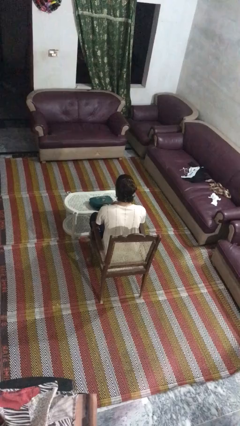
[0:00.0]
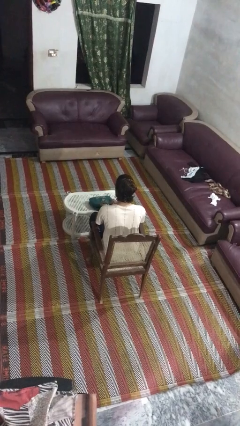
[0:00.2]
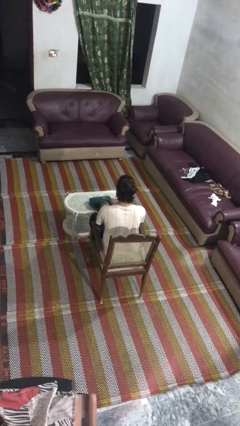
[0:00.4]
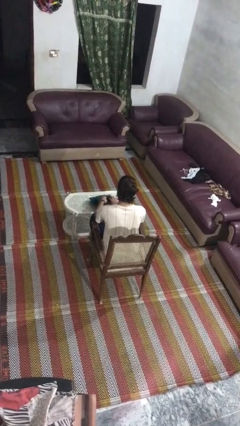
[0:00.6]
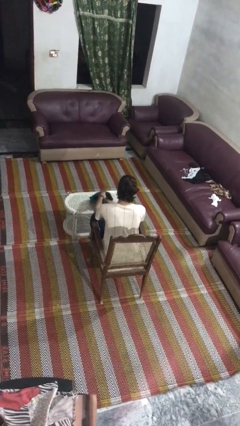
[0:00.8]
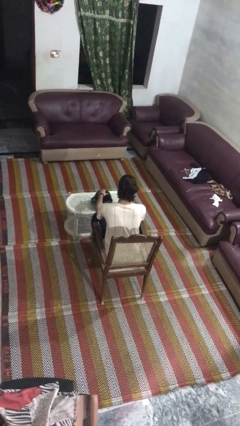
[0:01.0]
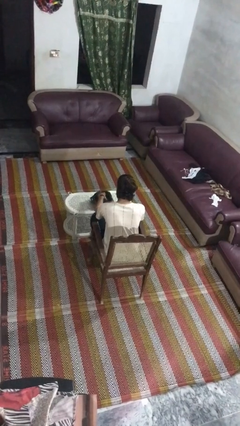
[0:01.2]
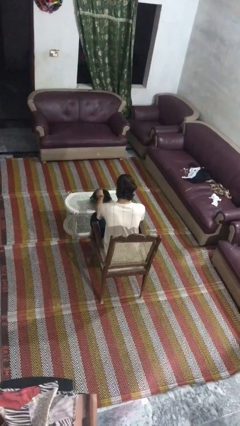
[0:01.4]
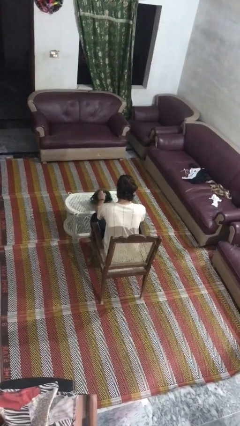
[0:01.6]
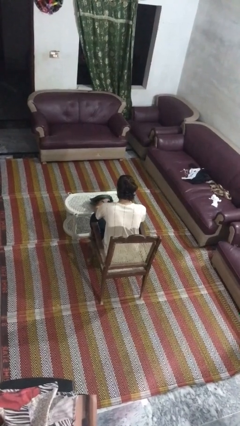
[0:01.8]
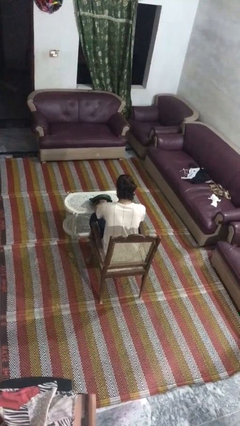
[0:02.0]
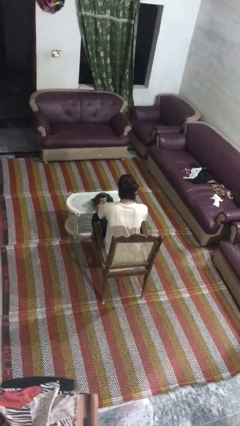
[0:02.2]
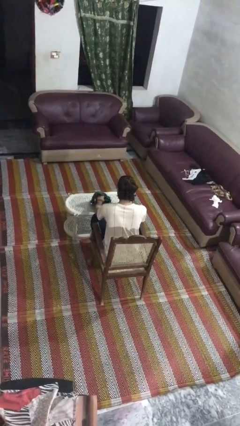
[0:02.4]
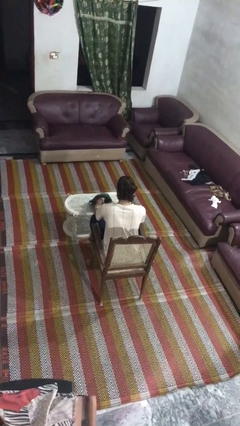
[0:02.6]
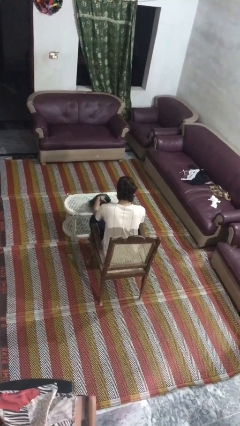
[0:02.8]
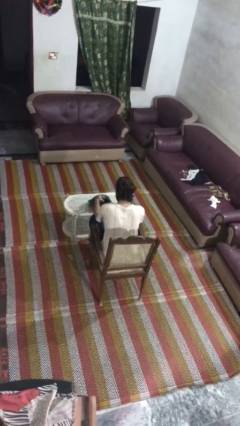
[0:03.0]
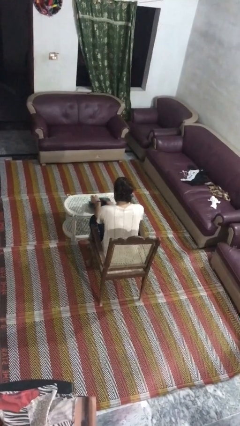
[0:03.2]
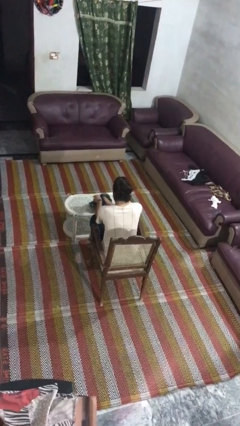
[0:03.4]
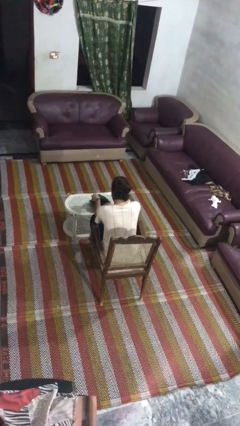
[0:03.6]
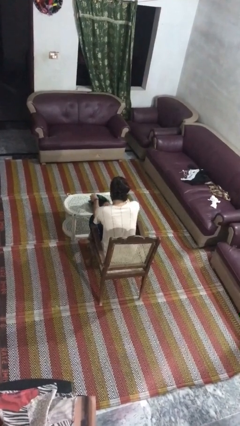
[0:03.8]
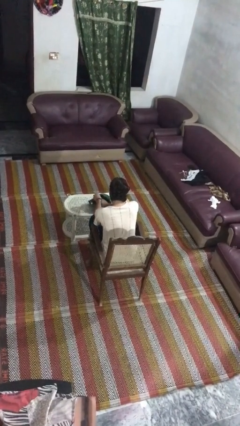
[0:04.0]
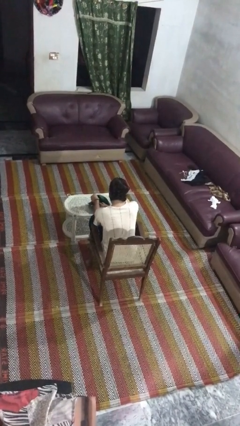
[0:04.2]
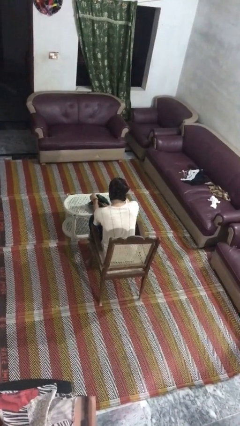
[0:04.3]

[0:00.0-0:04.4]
person searches in purse

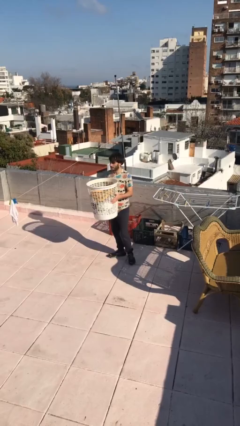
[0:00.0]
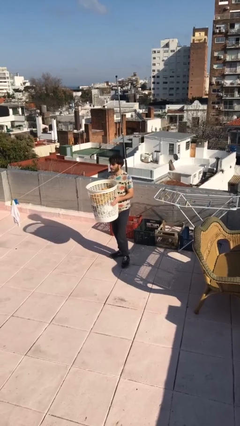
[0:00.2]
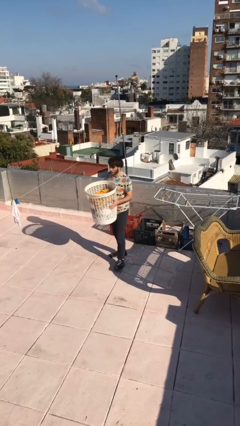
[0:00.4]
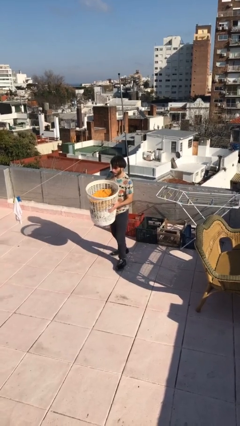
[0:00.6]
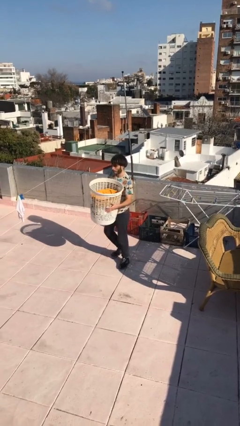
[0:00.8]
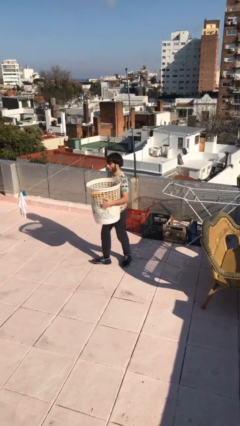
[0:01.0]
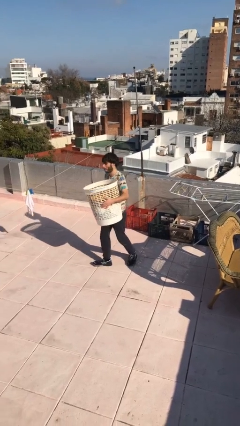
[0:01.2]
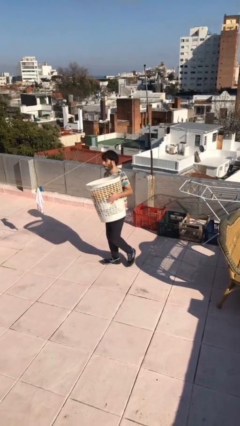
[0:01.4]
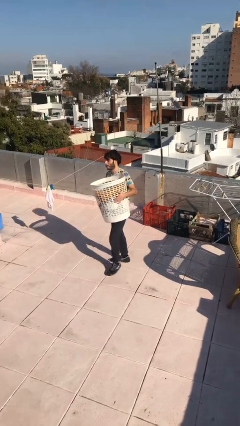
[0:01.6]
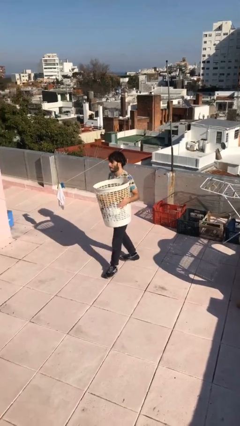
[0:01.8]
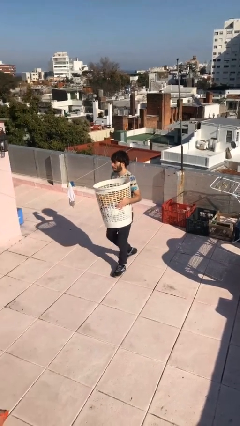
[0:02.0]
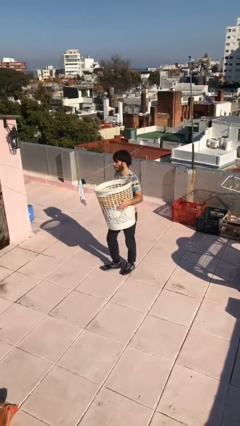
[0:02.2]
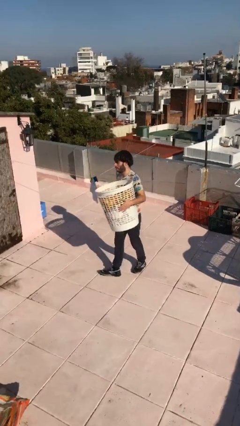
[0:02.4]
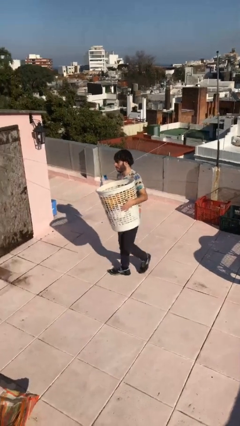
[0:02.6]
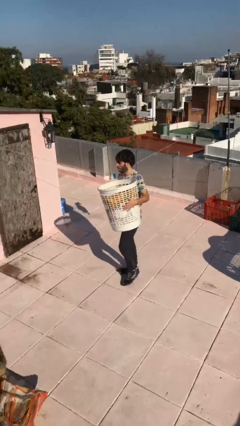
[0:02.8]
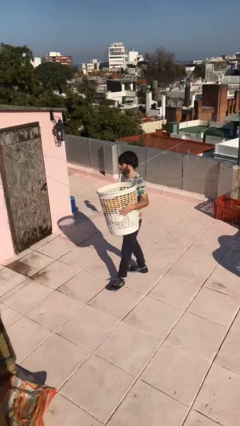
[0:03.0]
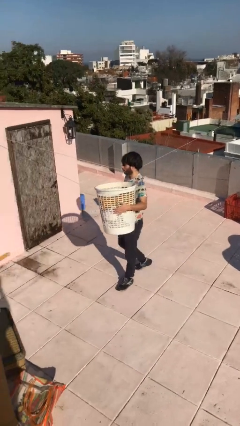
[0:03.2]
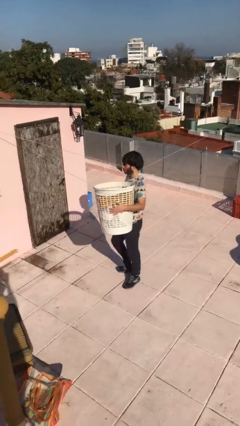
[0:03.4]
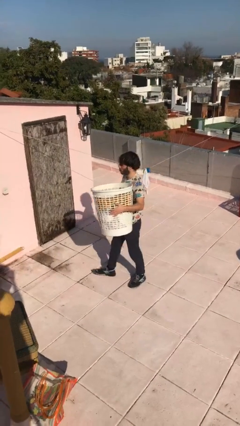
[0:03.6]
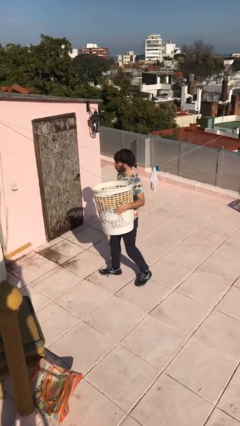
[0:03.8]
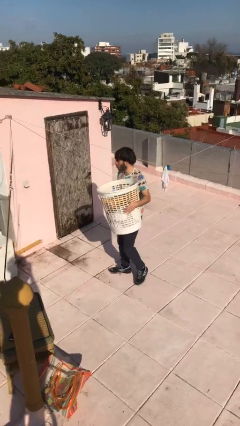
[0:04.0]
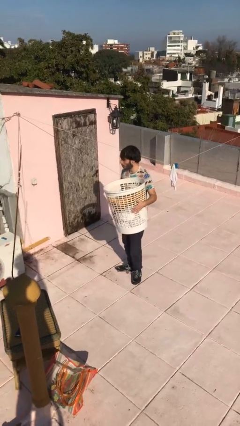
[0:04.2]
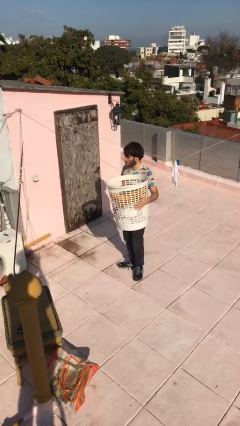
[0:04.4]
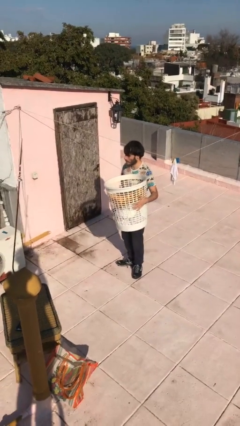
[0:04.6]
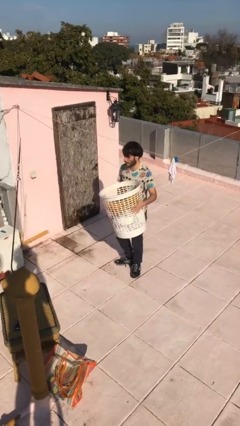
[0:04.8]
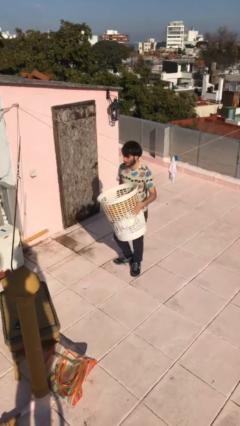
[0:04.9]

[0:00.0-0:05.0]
person carries laundry basket

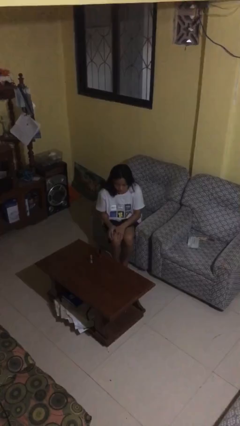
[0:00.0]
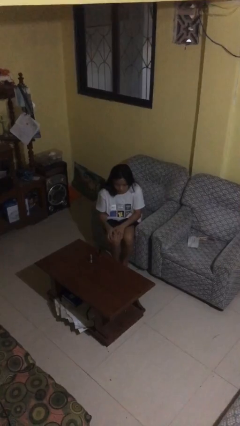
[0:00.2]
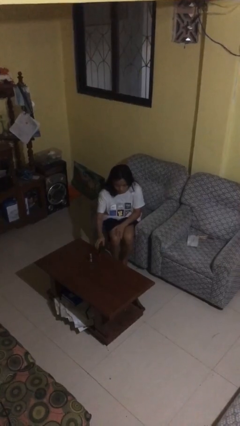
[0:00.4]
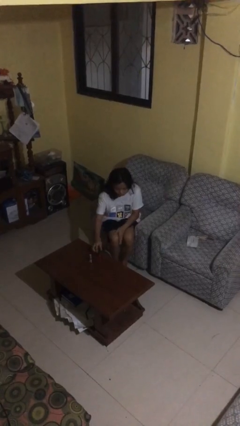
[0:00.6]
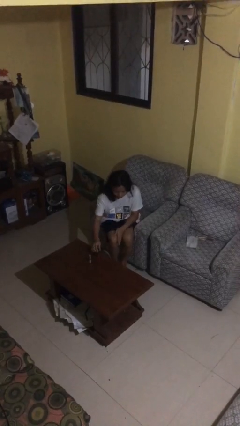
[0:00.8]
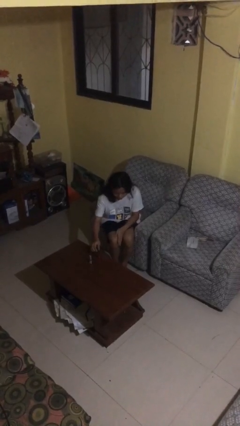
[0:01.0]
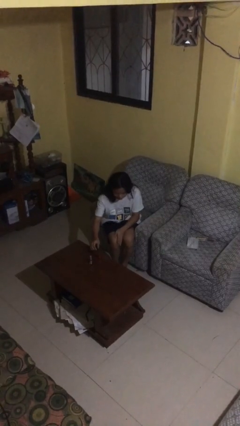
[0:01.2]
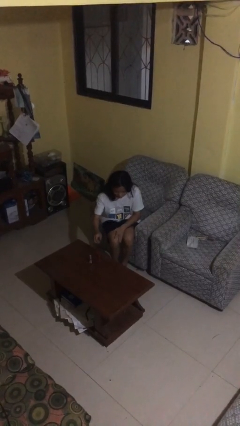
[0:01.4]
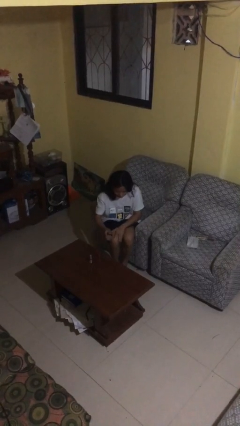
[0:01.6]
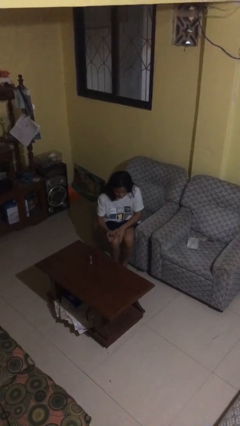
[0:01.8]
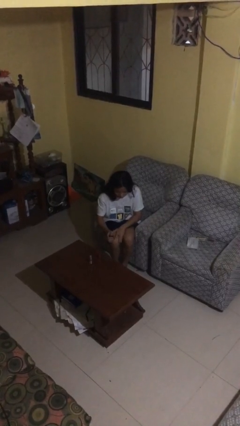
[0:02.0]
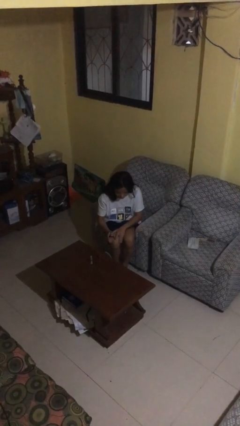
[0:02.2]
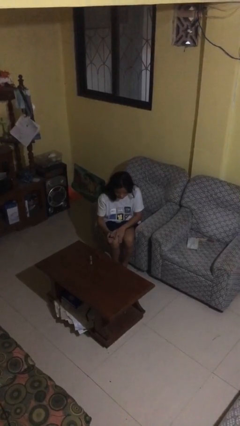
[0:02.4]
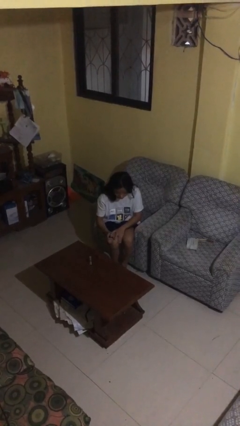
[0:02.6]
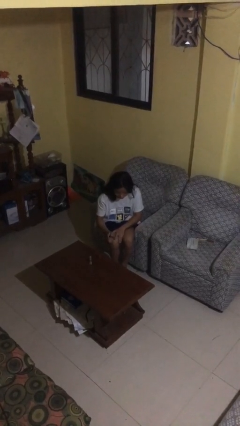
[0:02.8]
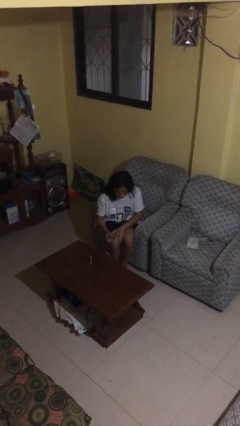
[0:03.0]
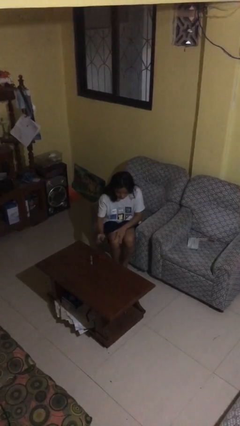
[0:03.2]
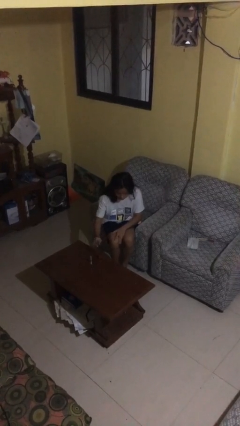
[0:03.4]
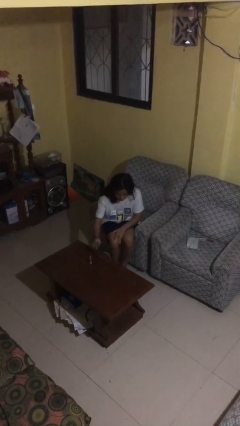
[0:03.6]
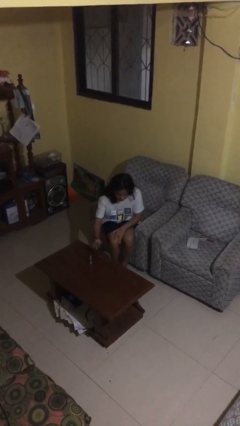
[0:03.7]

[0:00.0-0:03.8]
person paints fingernails

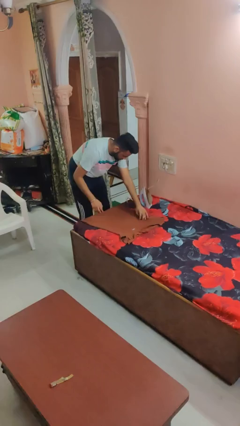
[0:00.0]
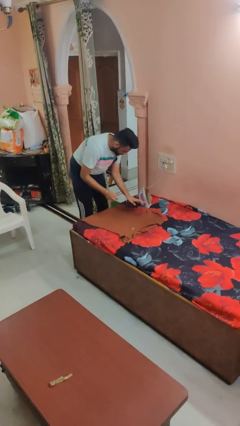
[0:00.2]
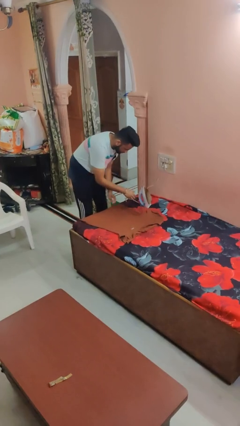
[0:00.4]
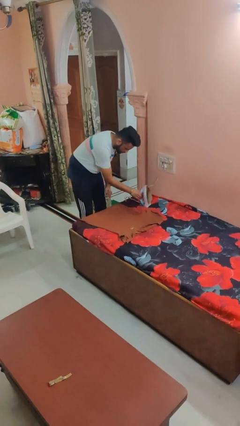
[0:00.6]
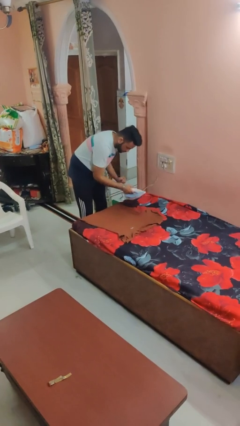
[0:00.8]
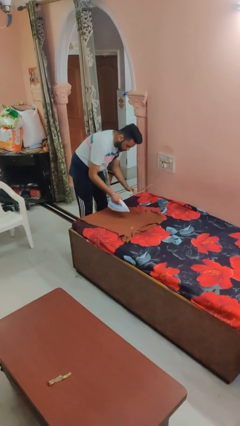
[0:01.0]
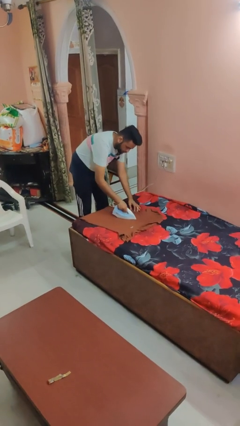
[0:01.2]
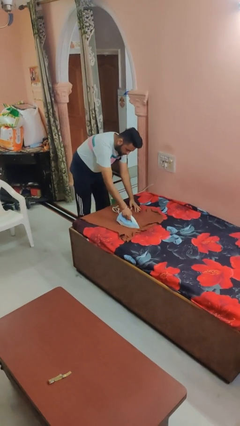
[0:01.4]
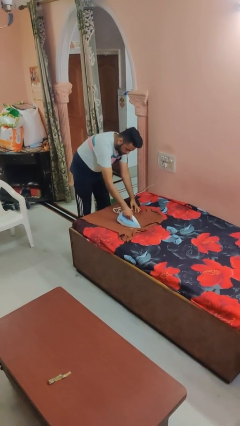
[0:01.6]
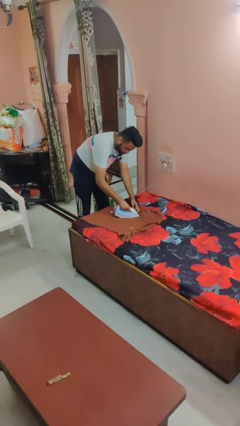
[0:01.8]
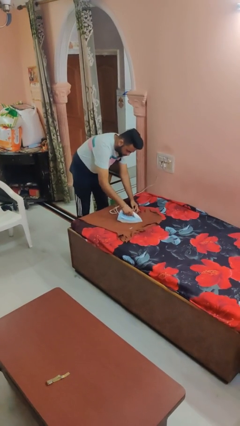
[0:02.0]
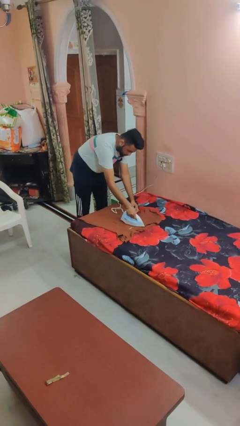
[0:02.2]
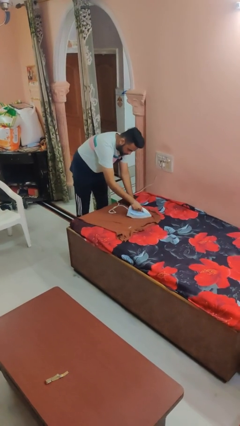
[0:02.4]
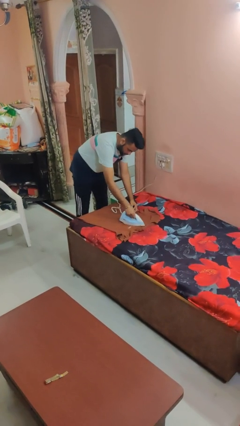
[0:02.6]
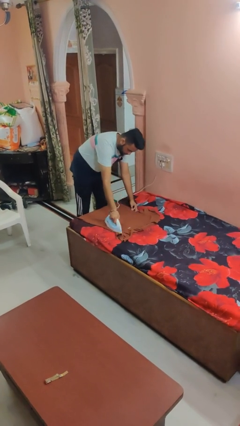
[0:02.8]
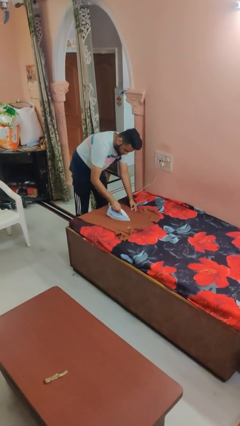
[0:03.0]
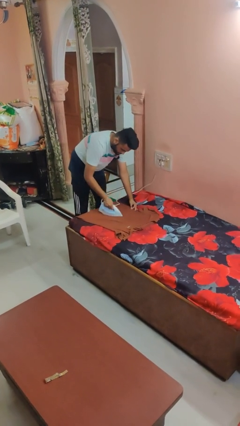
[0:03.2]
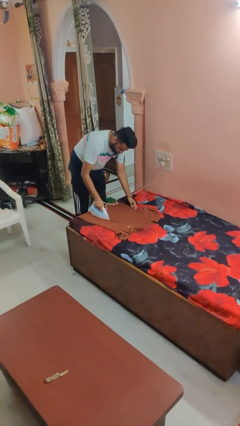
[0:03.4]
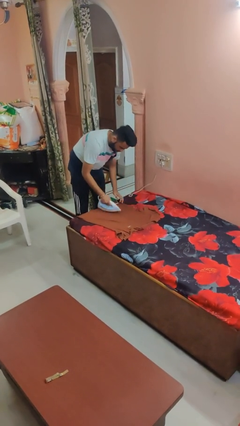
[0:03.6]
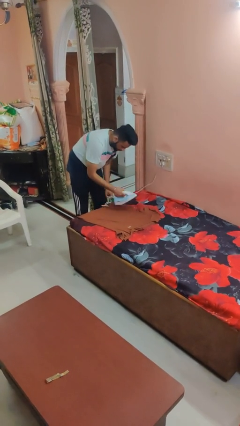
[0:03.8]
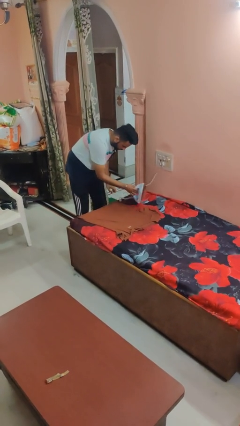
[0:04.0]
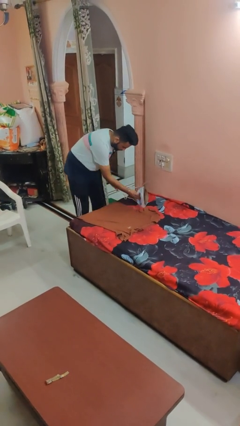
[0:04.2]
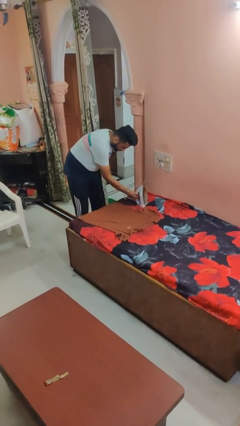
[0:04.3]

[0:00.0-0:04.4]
person irons clothes
